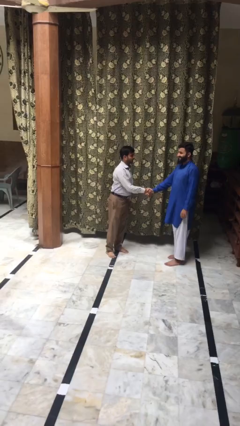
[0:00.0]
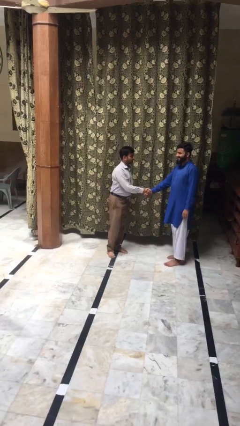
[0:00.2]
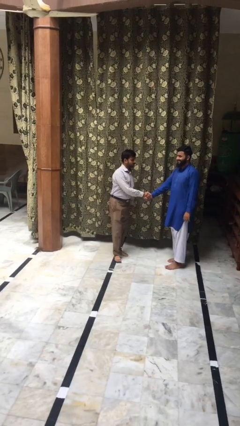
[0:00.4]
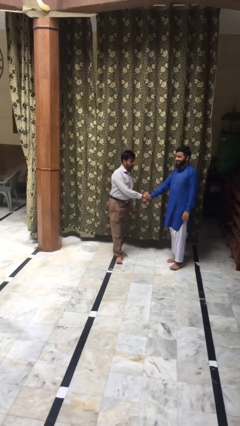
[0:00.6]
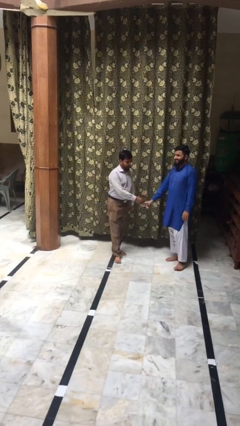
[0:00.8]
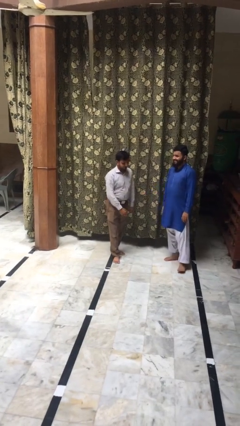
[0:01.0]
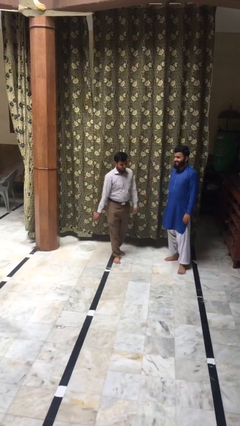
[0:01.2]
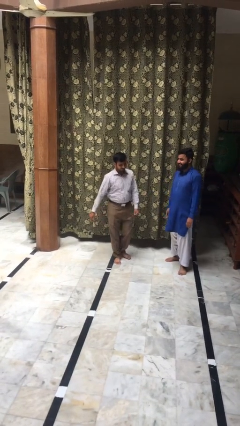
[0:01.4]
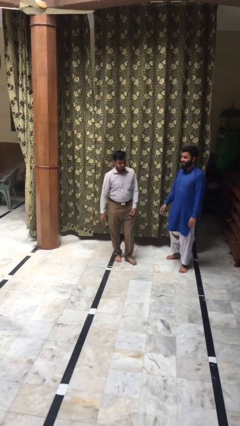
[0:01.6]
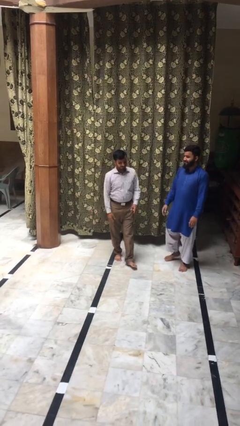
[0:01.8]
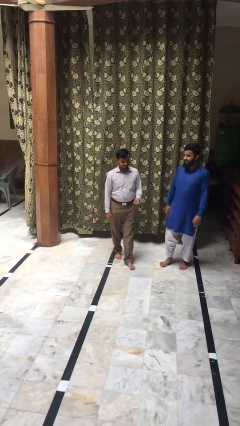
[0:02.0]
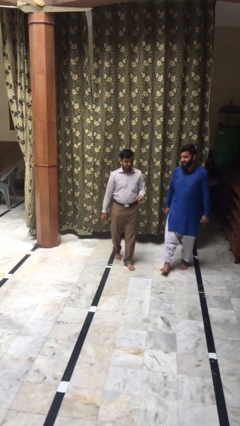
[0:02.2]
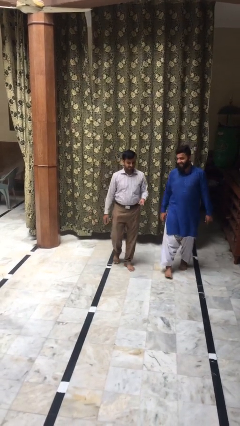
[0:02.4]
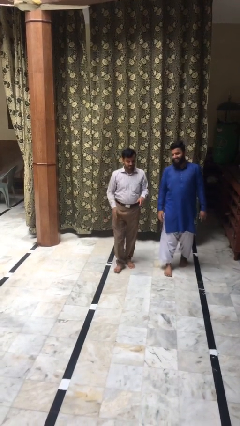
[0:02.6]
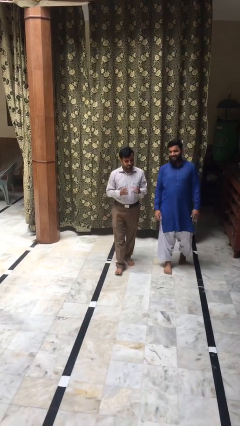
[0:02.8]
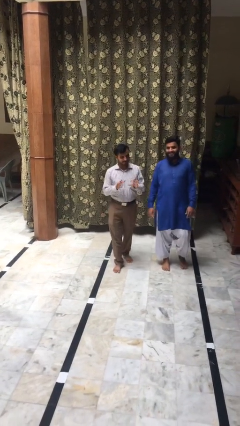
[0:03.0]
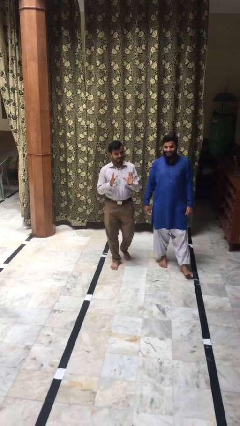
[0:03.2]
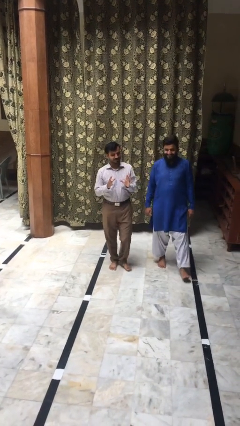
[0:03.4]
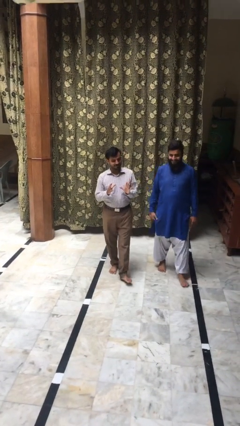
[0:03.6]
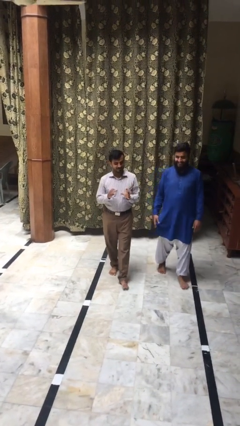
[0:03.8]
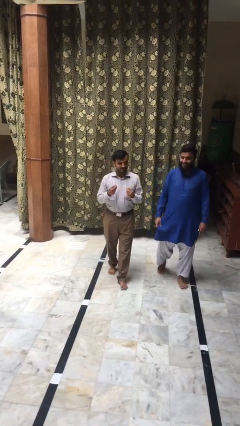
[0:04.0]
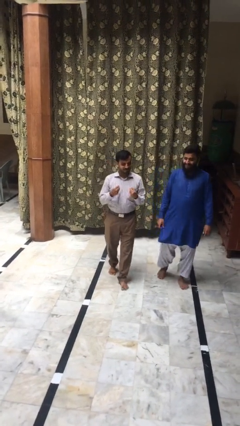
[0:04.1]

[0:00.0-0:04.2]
person talks to person

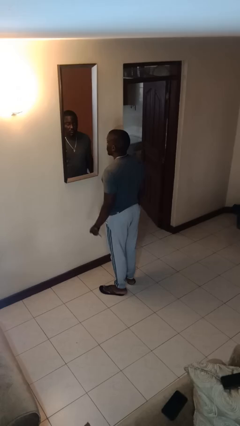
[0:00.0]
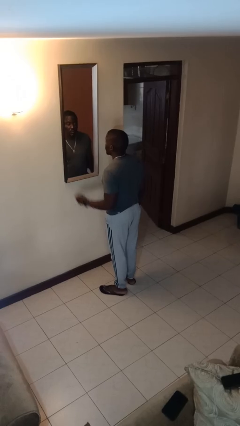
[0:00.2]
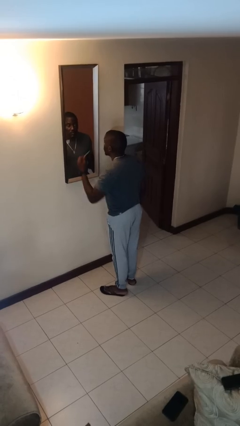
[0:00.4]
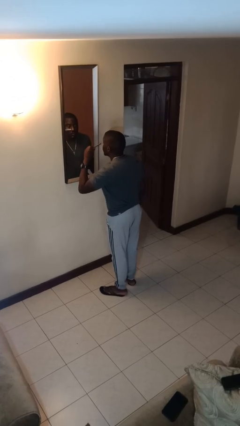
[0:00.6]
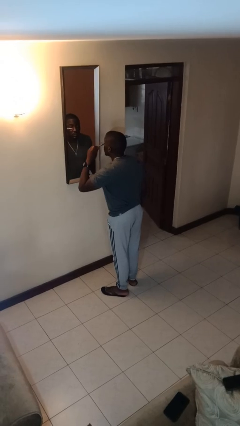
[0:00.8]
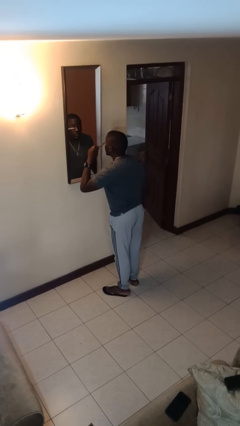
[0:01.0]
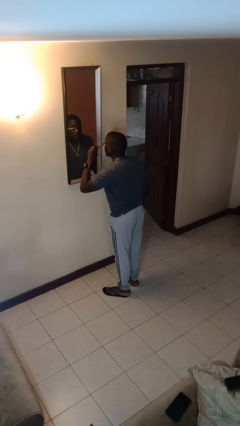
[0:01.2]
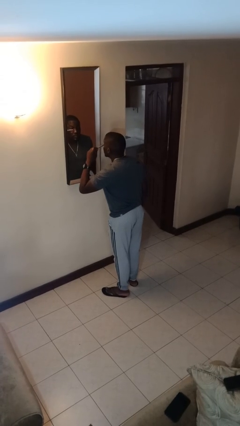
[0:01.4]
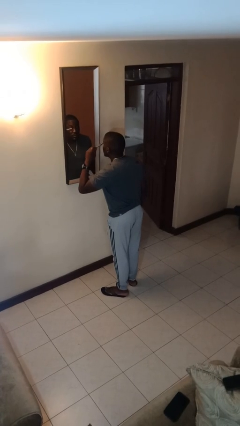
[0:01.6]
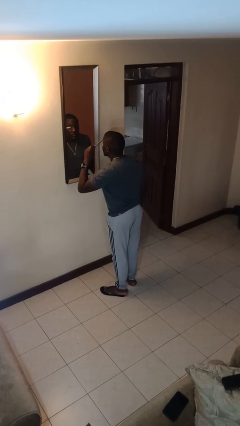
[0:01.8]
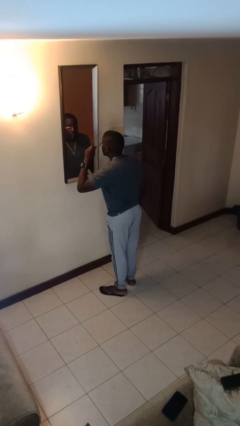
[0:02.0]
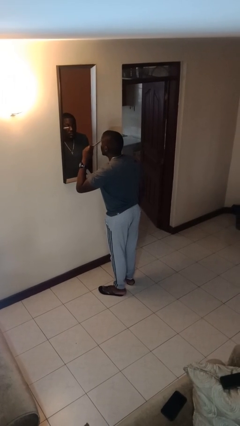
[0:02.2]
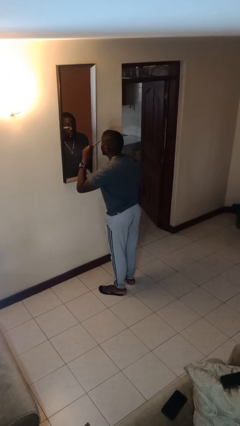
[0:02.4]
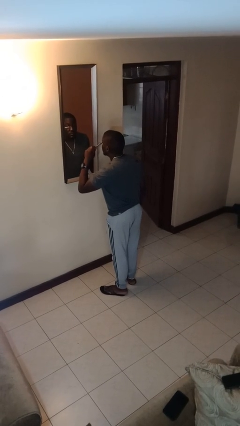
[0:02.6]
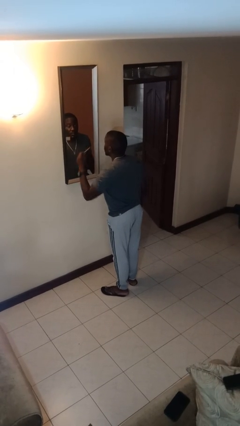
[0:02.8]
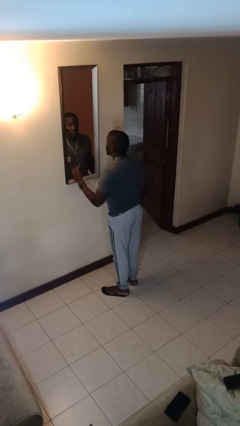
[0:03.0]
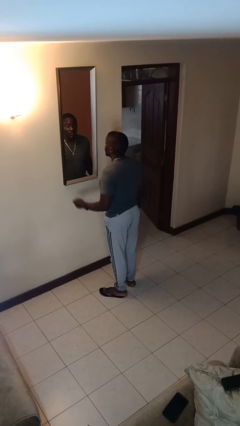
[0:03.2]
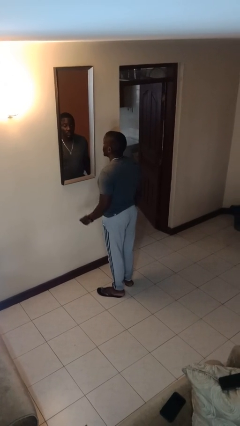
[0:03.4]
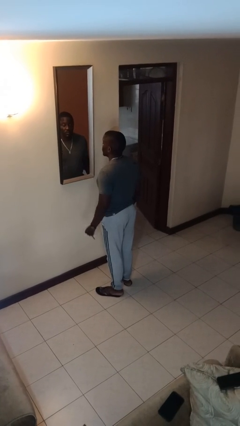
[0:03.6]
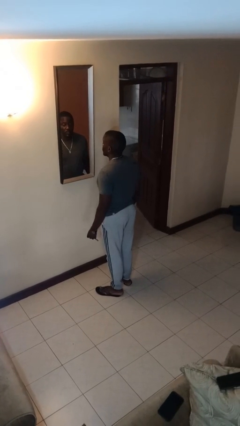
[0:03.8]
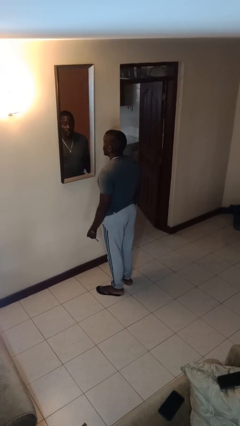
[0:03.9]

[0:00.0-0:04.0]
person applies eye makeup

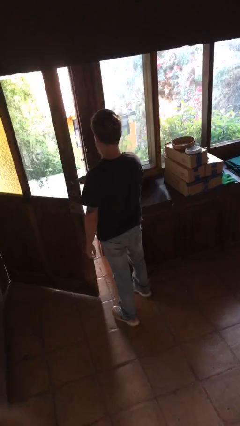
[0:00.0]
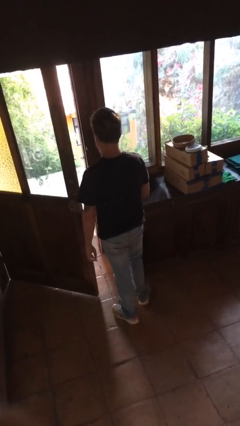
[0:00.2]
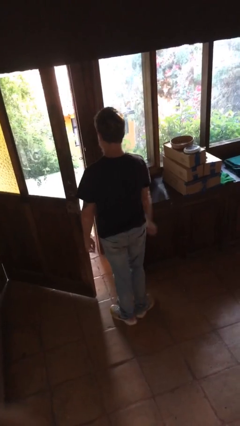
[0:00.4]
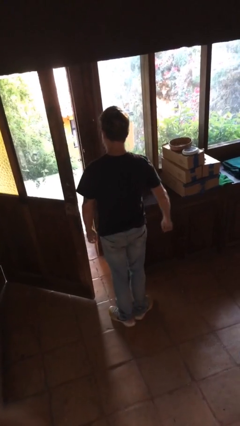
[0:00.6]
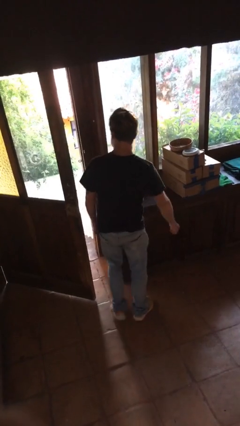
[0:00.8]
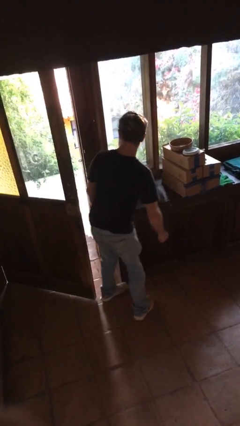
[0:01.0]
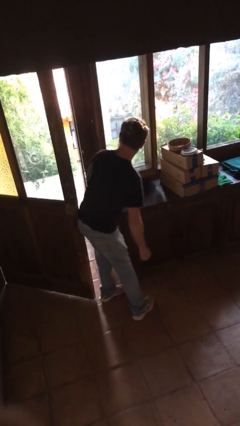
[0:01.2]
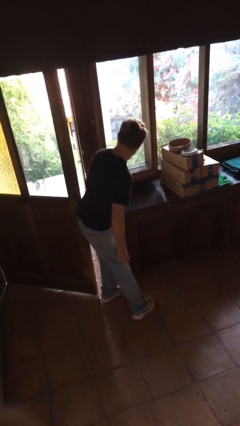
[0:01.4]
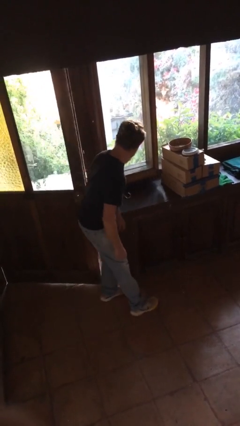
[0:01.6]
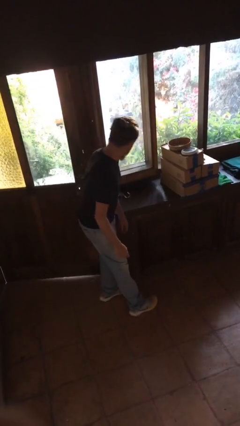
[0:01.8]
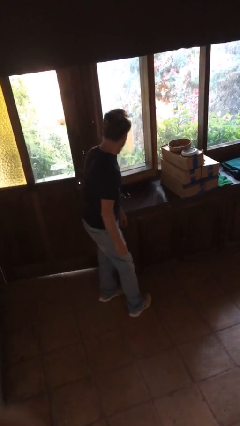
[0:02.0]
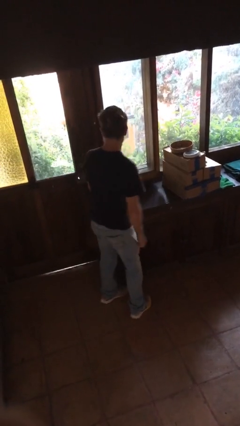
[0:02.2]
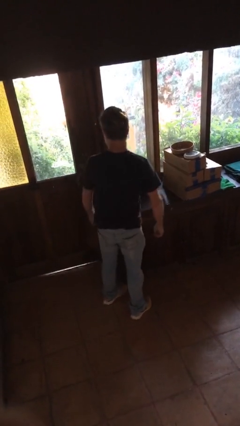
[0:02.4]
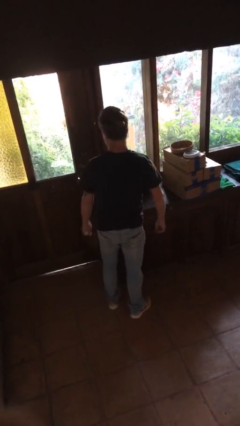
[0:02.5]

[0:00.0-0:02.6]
person closes door with hip

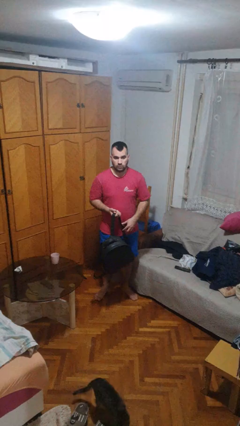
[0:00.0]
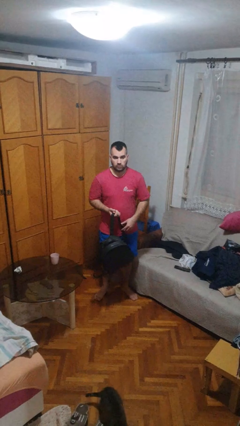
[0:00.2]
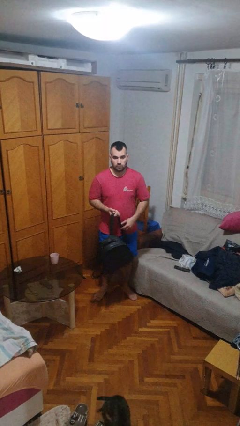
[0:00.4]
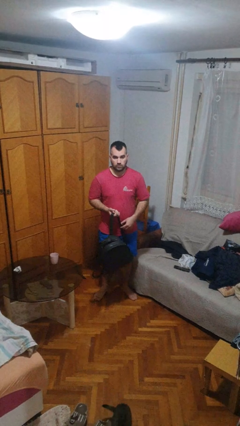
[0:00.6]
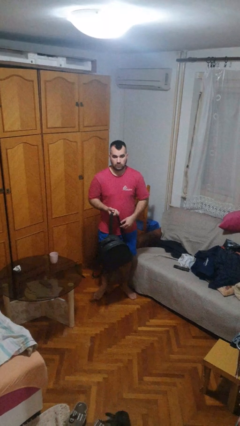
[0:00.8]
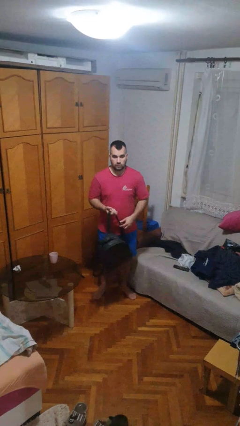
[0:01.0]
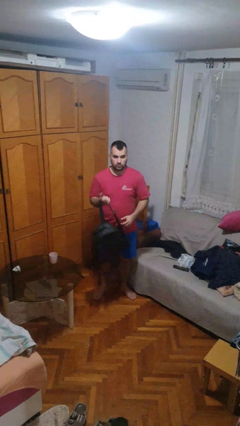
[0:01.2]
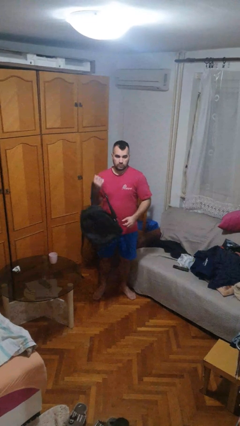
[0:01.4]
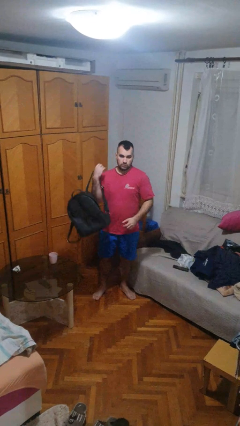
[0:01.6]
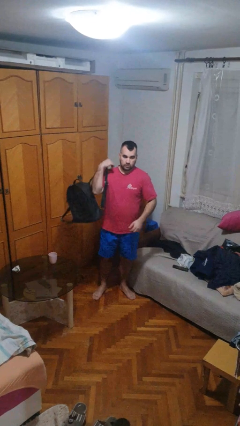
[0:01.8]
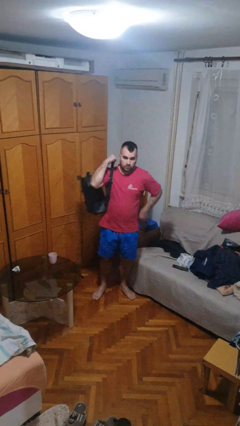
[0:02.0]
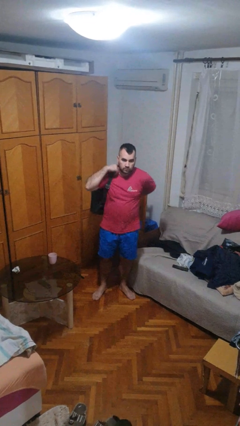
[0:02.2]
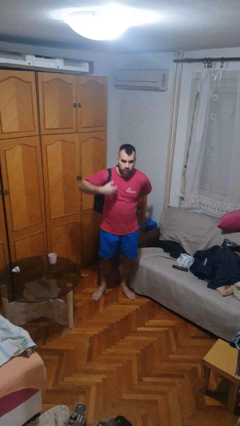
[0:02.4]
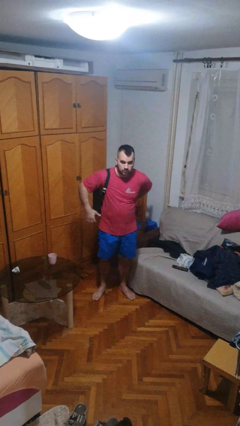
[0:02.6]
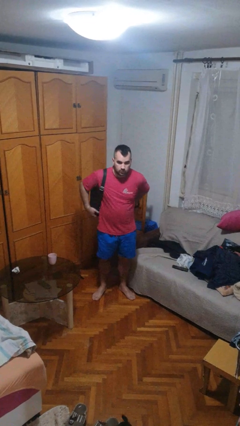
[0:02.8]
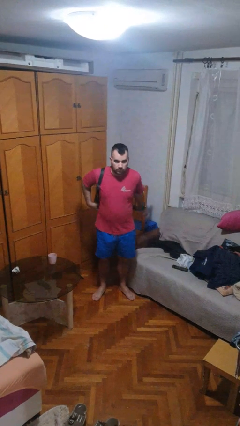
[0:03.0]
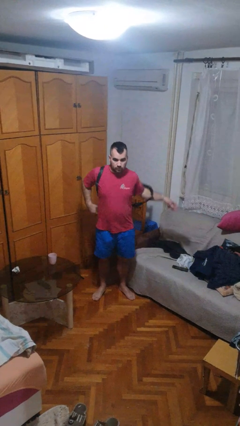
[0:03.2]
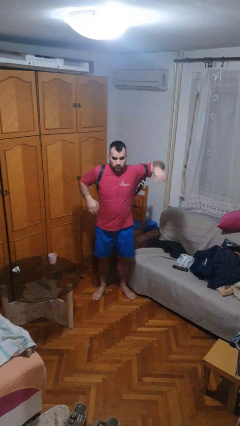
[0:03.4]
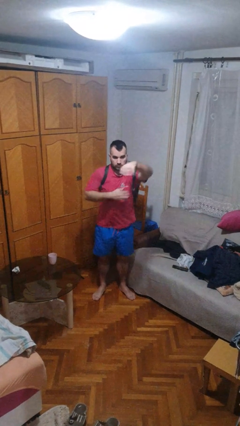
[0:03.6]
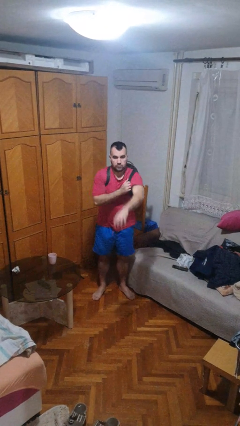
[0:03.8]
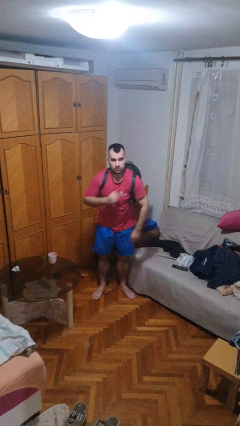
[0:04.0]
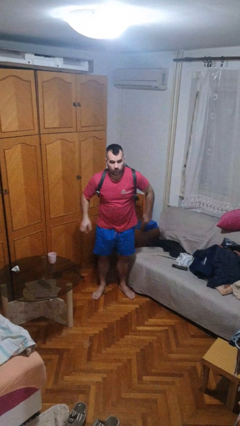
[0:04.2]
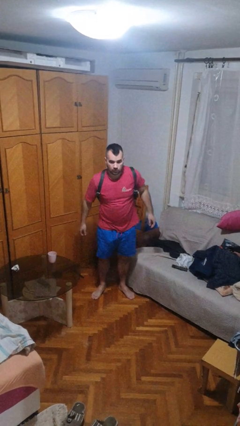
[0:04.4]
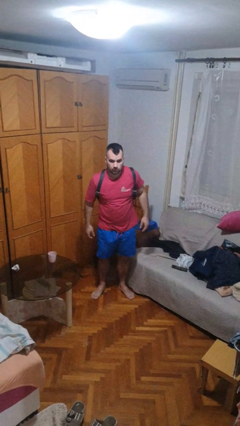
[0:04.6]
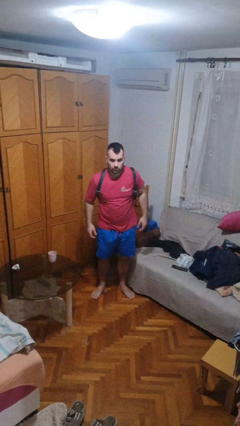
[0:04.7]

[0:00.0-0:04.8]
person puts on backpack

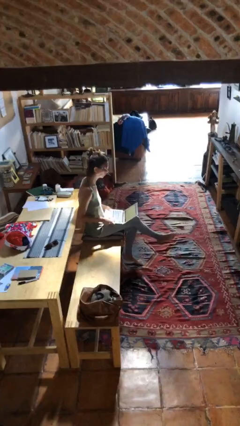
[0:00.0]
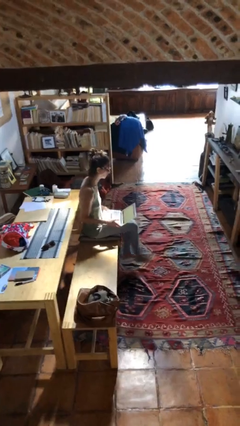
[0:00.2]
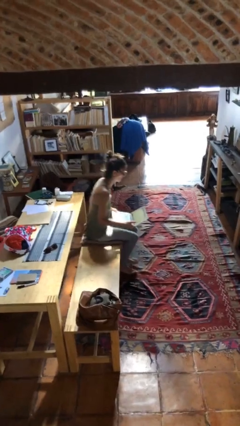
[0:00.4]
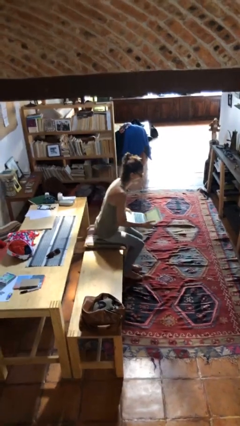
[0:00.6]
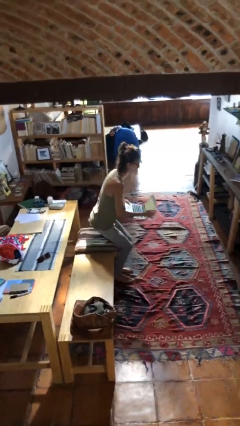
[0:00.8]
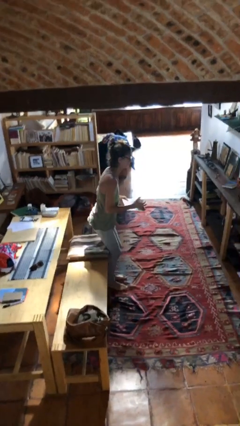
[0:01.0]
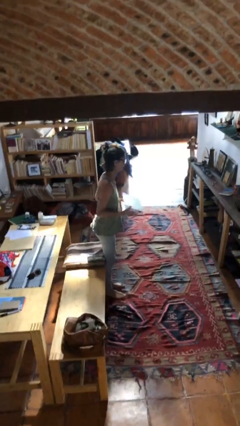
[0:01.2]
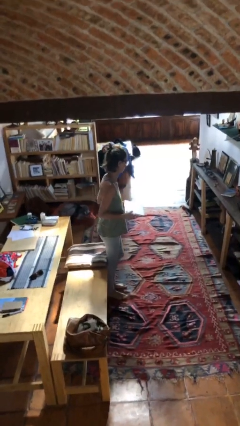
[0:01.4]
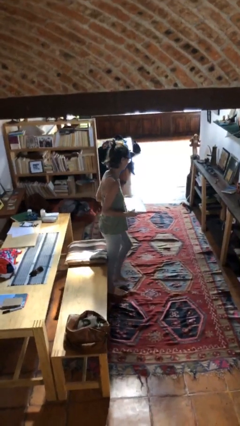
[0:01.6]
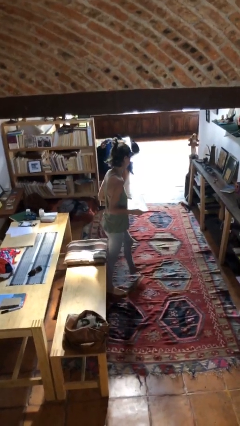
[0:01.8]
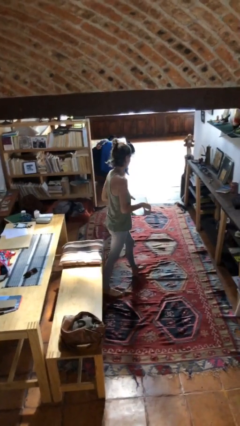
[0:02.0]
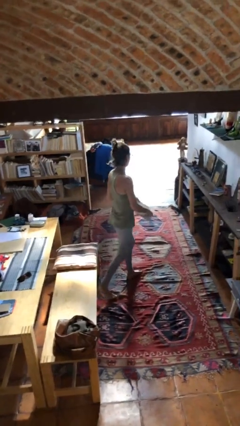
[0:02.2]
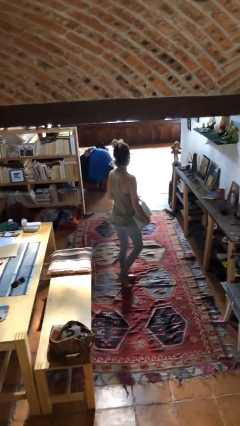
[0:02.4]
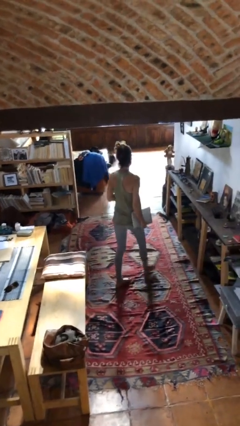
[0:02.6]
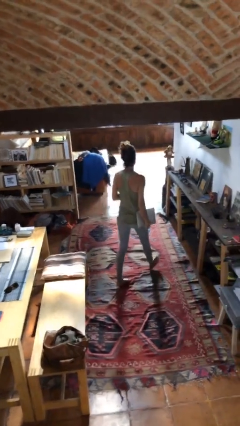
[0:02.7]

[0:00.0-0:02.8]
person stands up
